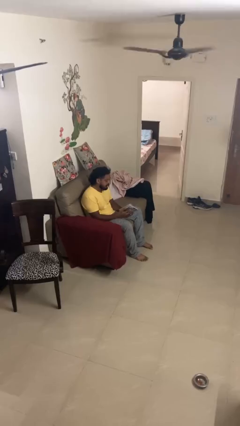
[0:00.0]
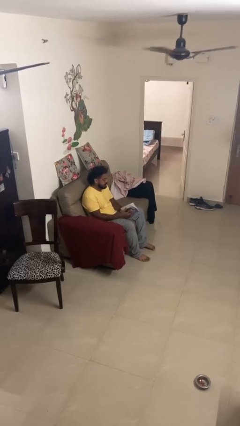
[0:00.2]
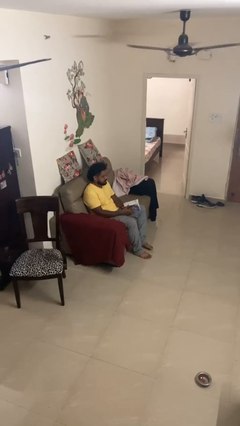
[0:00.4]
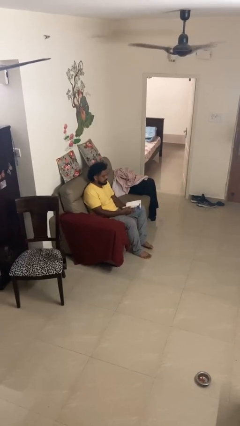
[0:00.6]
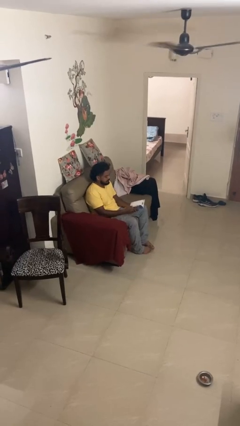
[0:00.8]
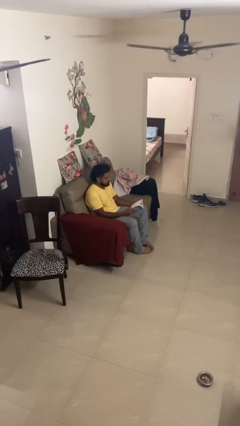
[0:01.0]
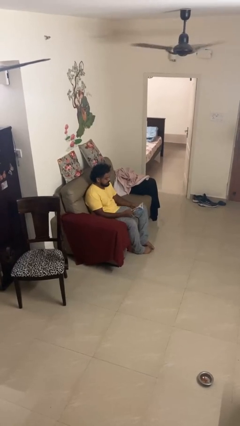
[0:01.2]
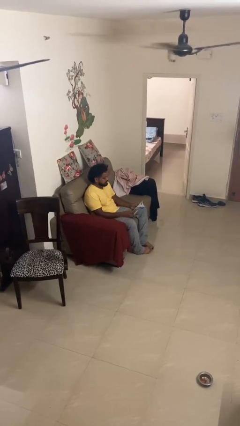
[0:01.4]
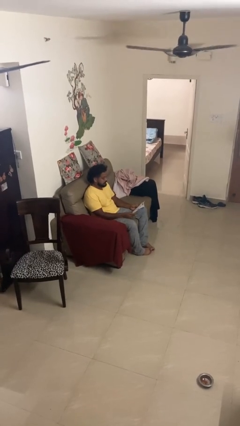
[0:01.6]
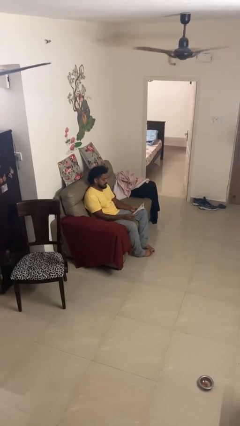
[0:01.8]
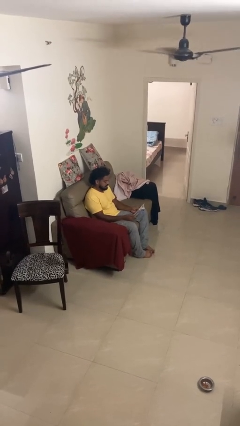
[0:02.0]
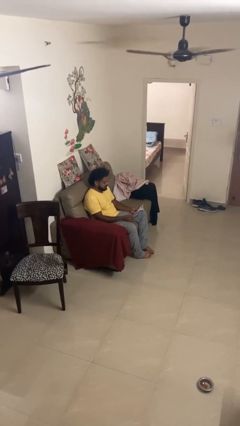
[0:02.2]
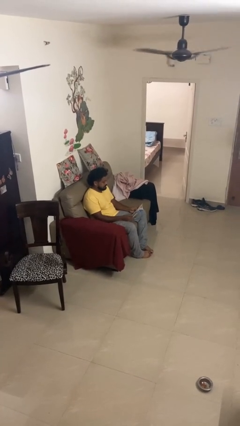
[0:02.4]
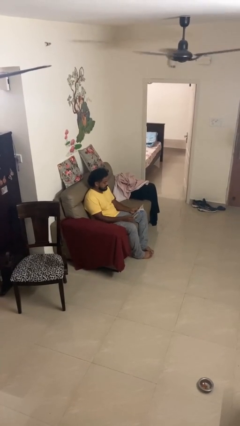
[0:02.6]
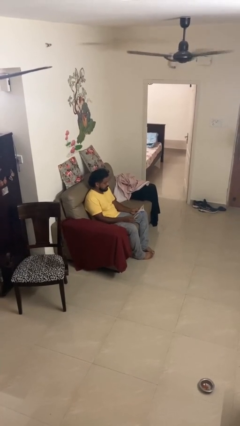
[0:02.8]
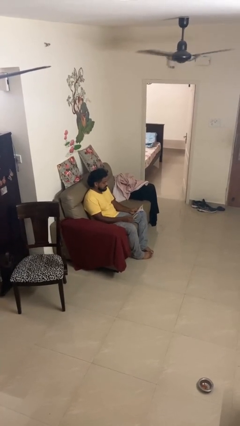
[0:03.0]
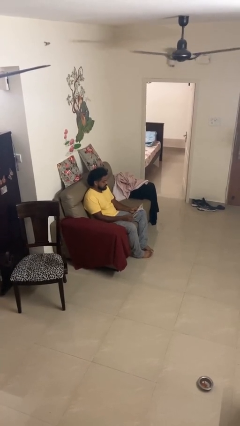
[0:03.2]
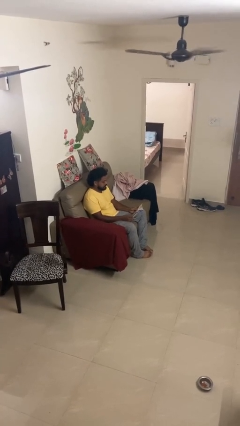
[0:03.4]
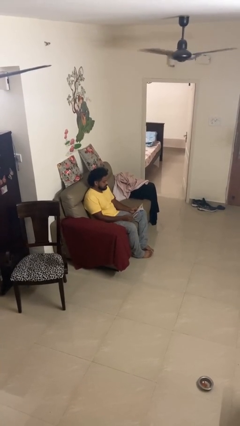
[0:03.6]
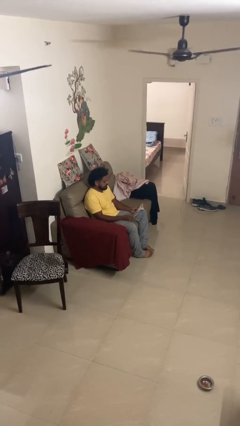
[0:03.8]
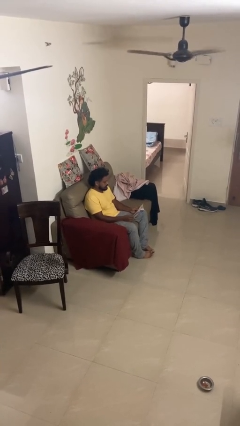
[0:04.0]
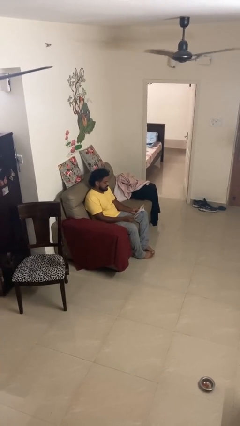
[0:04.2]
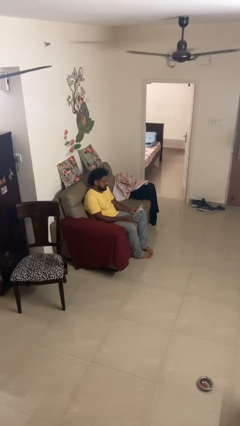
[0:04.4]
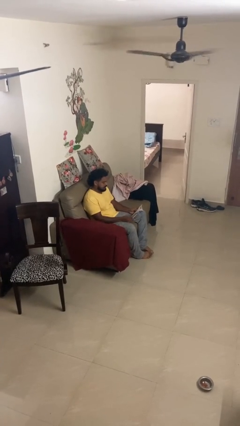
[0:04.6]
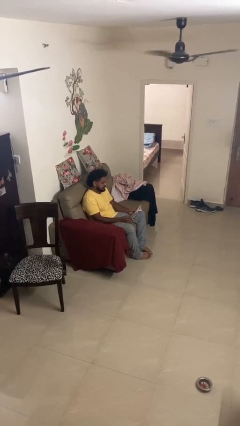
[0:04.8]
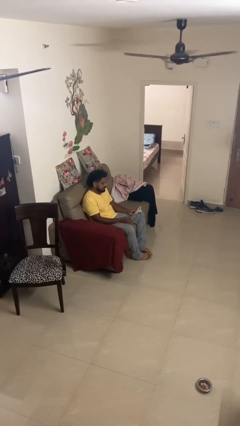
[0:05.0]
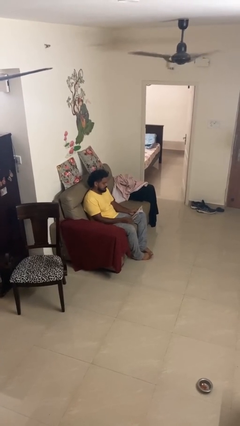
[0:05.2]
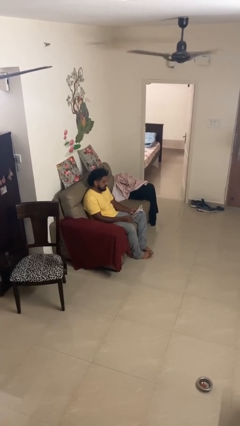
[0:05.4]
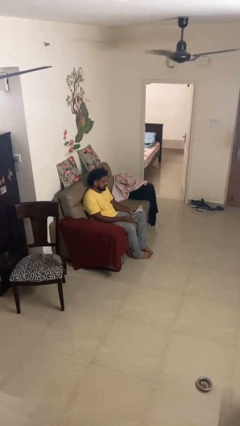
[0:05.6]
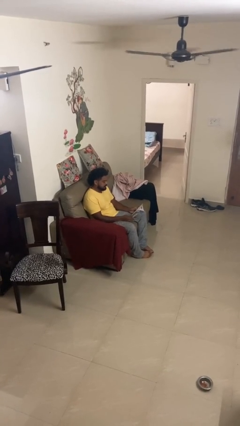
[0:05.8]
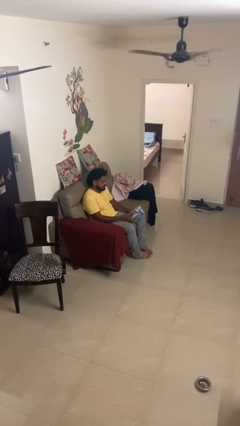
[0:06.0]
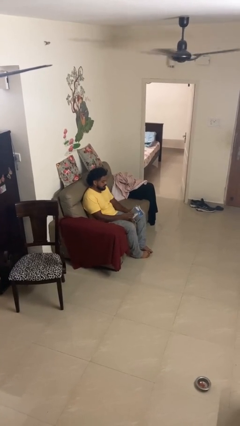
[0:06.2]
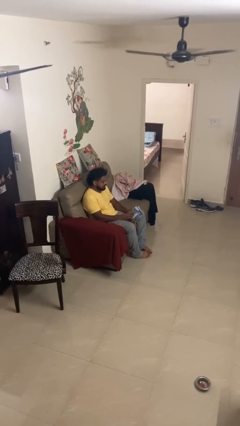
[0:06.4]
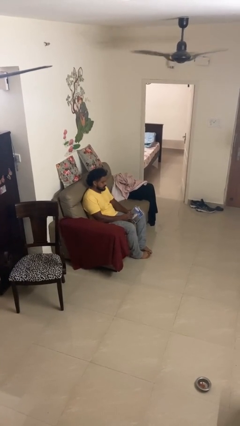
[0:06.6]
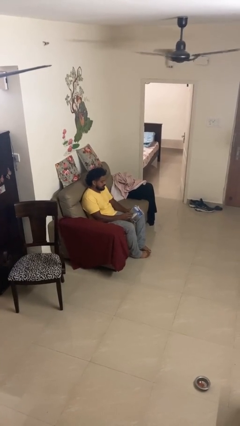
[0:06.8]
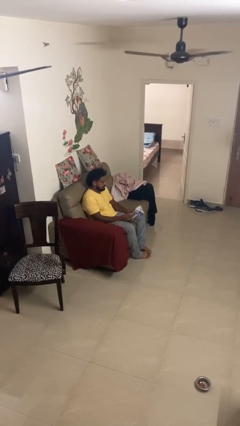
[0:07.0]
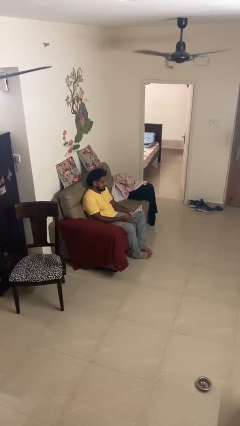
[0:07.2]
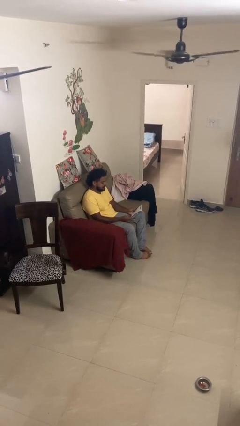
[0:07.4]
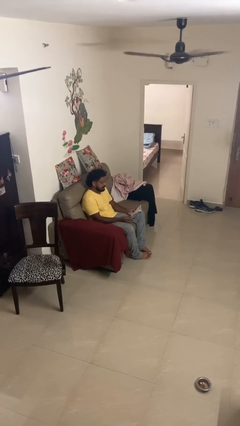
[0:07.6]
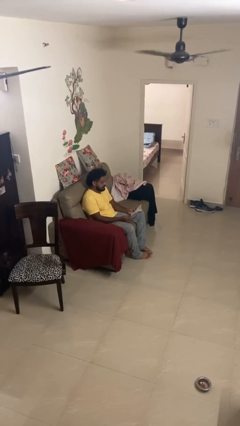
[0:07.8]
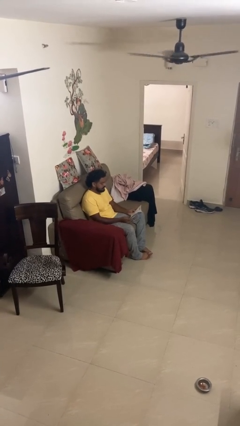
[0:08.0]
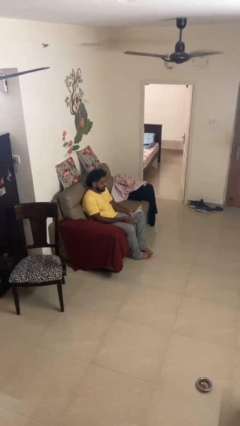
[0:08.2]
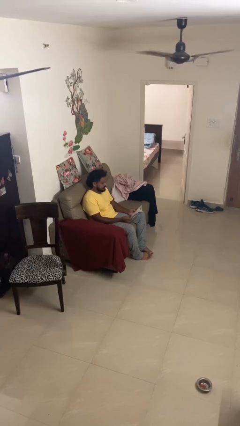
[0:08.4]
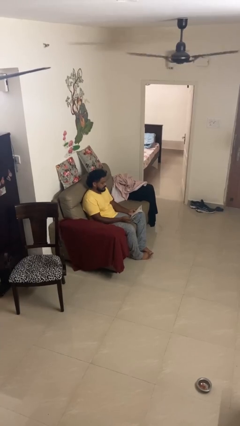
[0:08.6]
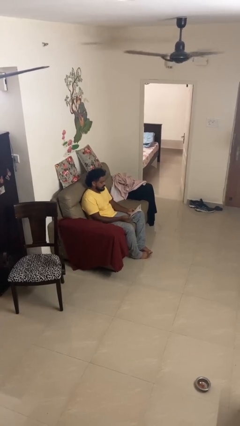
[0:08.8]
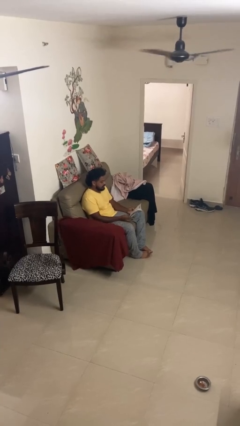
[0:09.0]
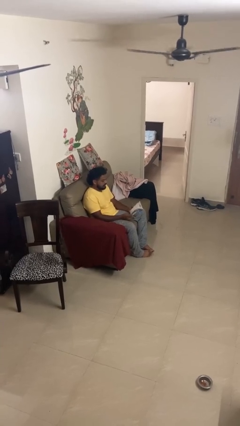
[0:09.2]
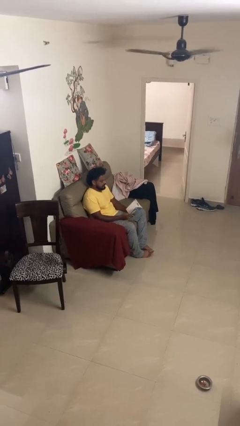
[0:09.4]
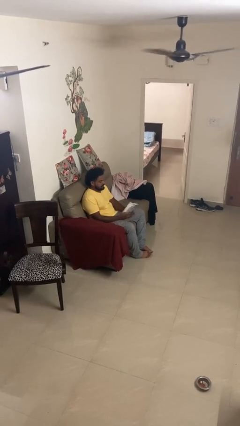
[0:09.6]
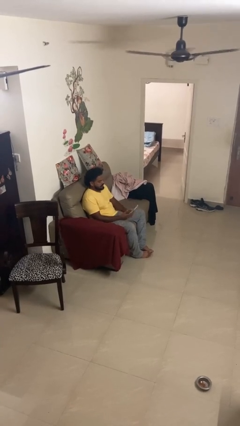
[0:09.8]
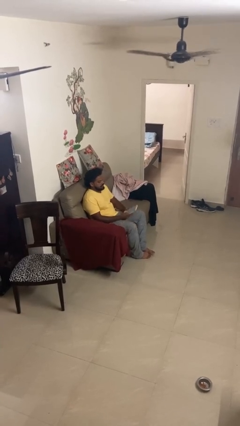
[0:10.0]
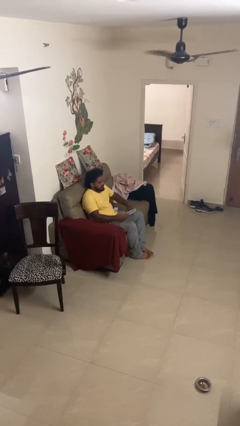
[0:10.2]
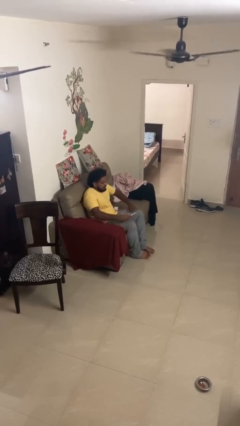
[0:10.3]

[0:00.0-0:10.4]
person reads document

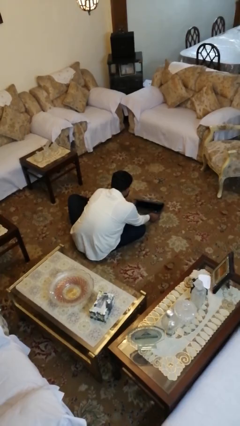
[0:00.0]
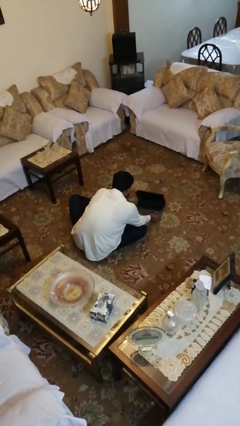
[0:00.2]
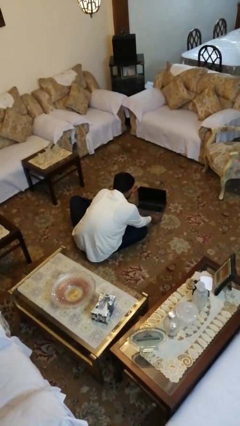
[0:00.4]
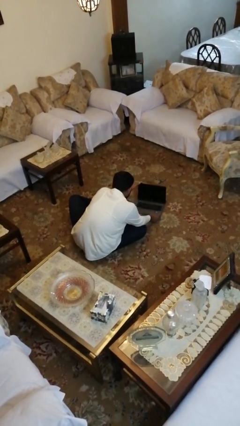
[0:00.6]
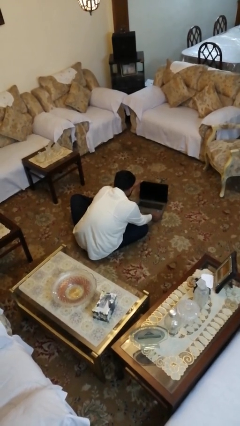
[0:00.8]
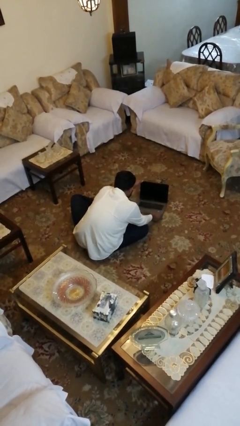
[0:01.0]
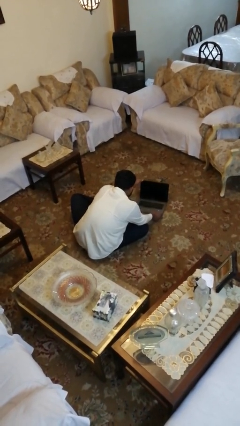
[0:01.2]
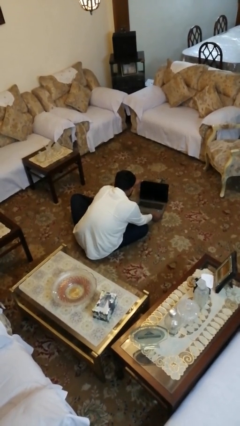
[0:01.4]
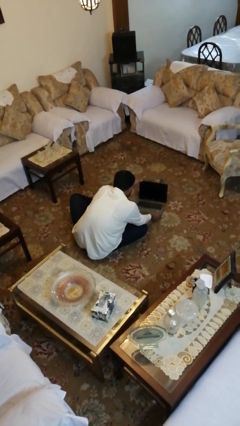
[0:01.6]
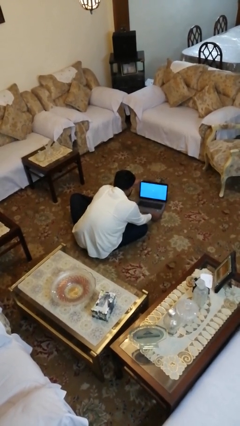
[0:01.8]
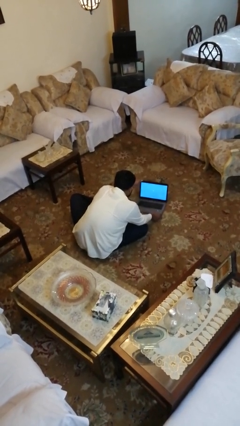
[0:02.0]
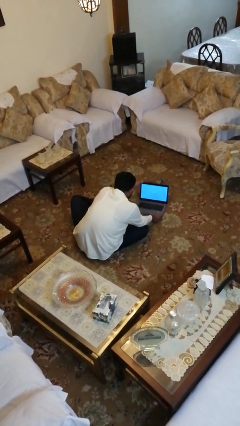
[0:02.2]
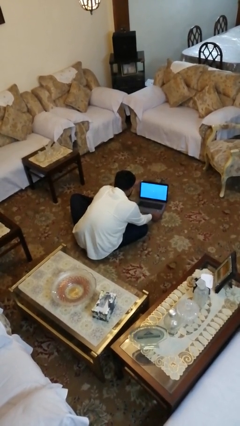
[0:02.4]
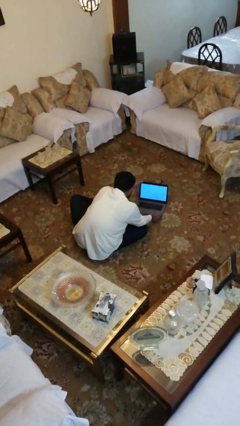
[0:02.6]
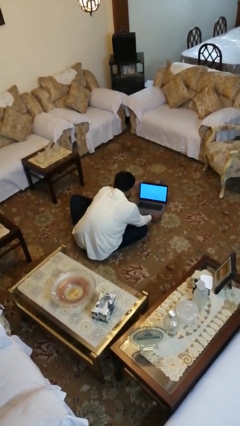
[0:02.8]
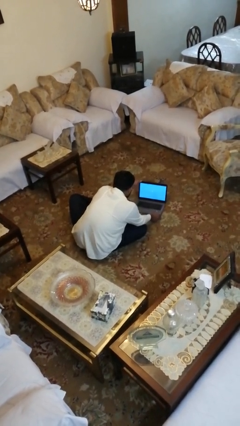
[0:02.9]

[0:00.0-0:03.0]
person opens laptop

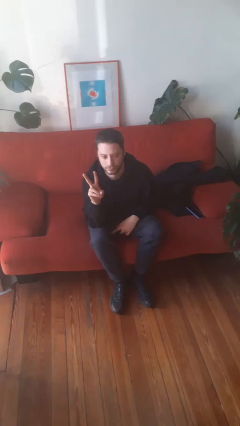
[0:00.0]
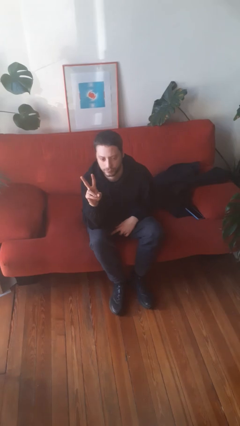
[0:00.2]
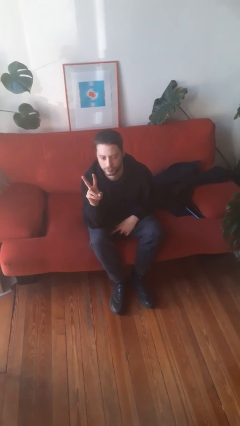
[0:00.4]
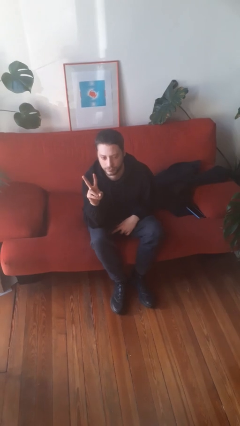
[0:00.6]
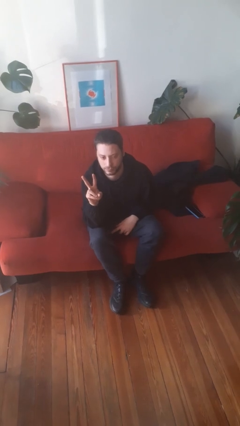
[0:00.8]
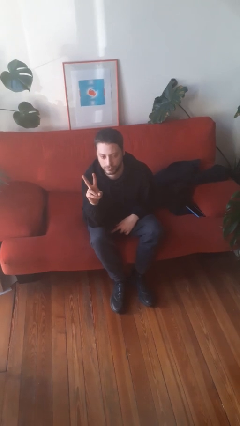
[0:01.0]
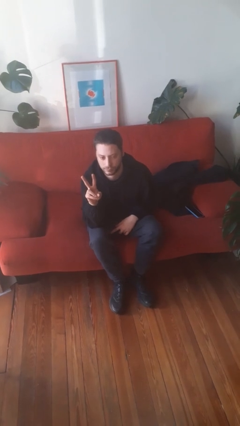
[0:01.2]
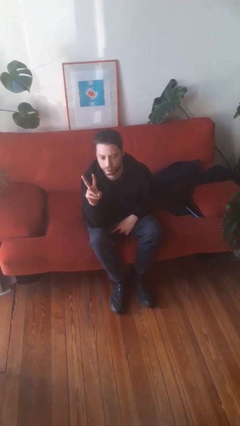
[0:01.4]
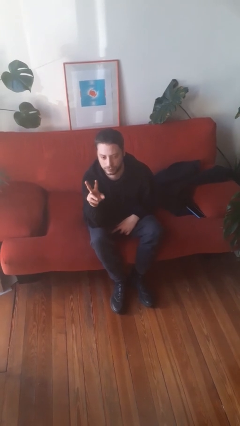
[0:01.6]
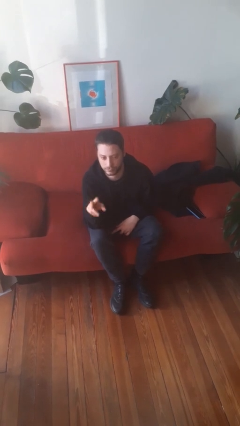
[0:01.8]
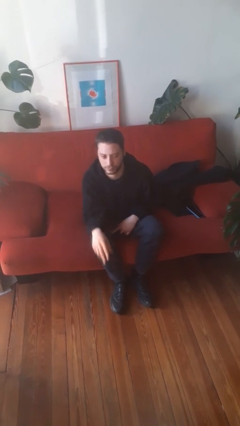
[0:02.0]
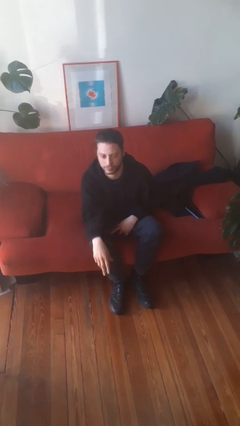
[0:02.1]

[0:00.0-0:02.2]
person gestures peace

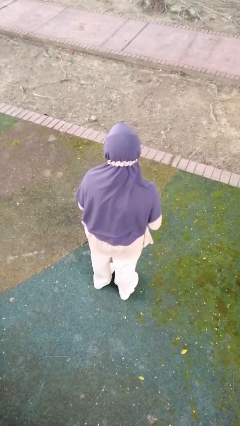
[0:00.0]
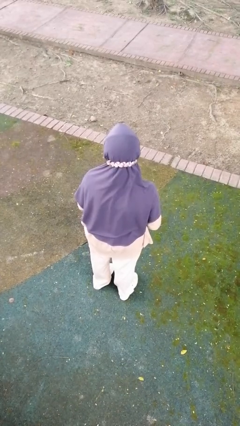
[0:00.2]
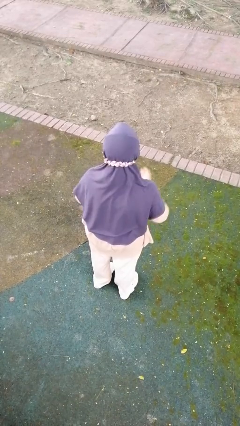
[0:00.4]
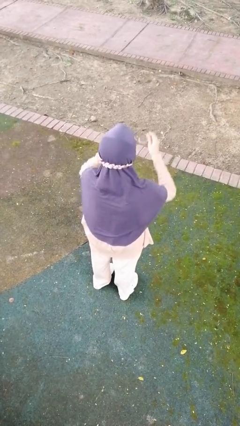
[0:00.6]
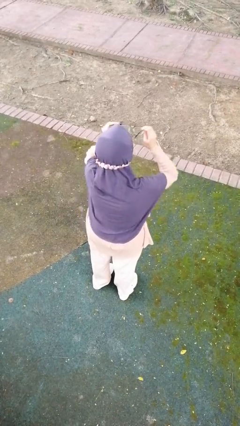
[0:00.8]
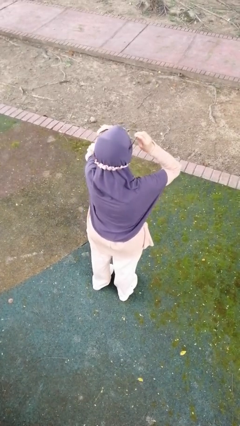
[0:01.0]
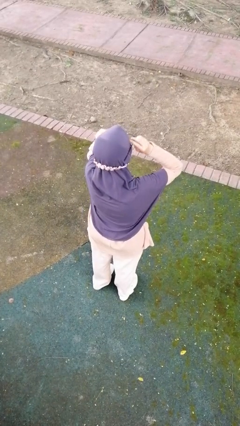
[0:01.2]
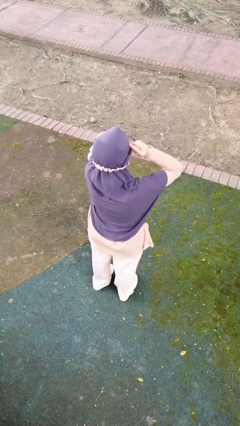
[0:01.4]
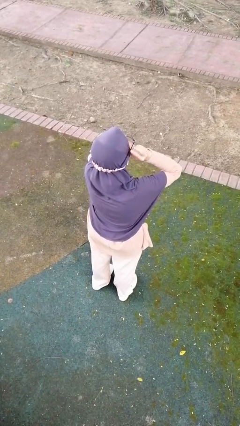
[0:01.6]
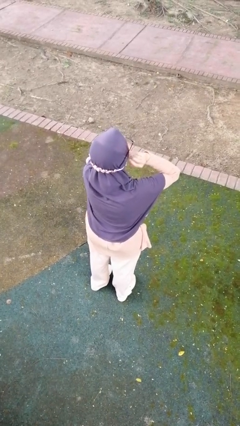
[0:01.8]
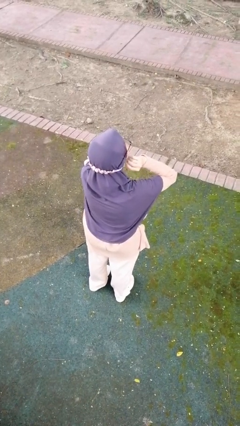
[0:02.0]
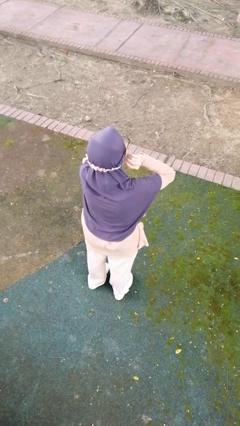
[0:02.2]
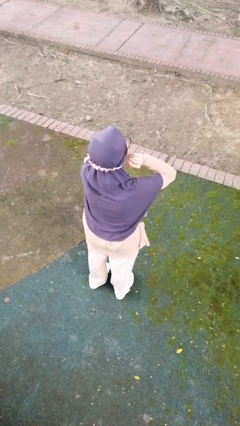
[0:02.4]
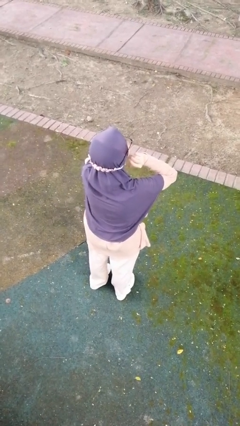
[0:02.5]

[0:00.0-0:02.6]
person puts on glasses
